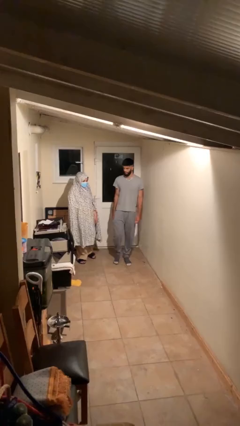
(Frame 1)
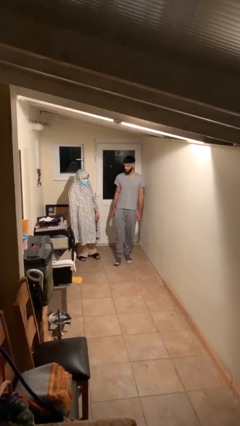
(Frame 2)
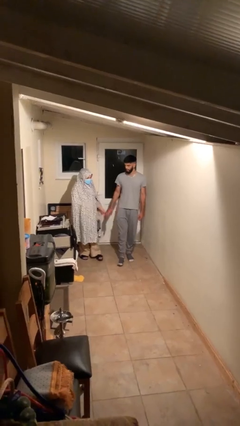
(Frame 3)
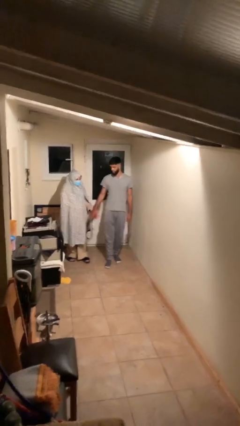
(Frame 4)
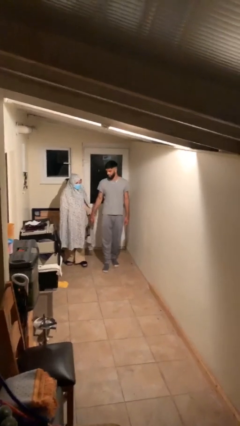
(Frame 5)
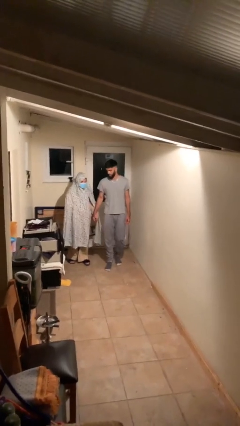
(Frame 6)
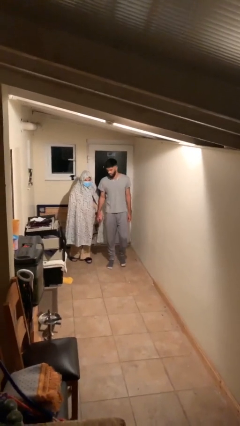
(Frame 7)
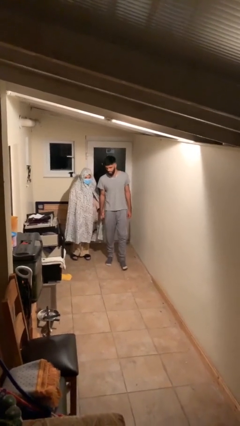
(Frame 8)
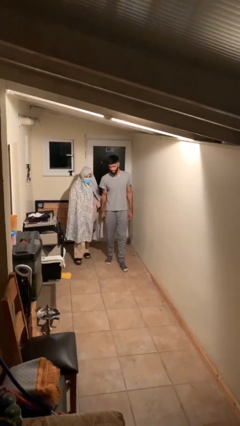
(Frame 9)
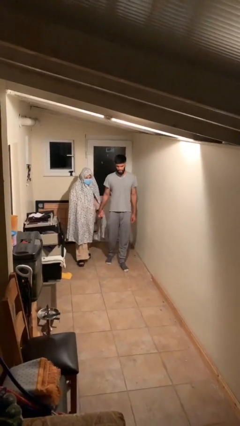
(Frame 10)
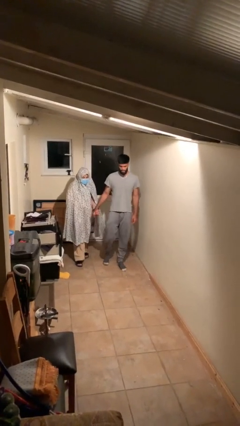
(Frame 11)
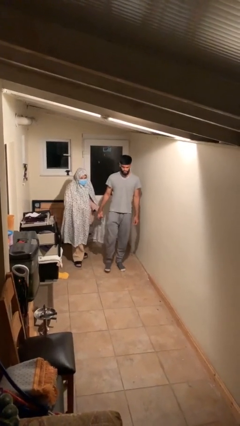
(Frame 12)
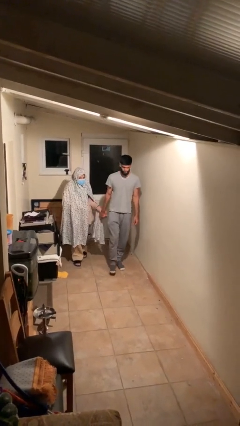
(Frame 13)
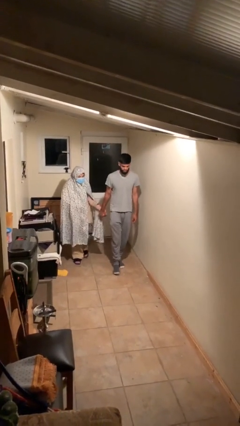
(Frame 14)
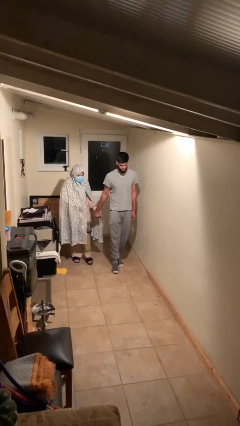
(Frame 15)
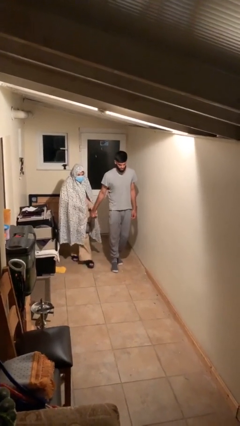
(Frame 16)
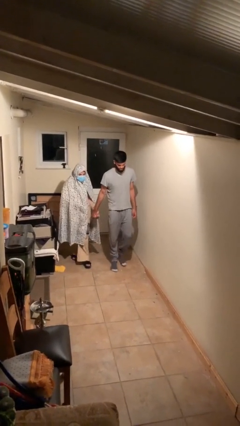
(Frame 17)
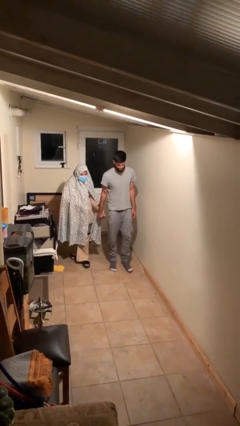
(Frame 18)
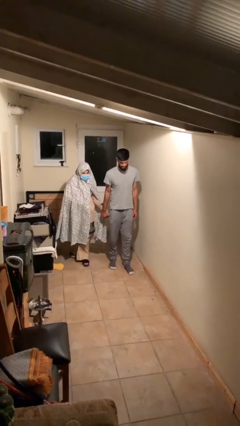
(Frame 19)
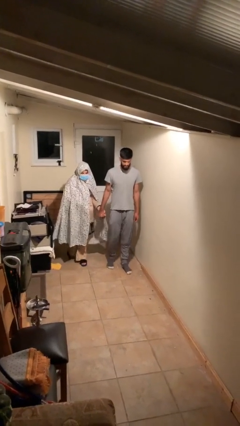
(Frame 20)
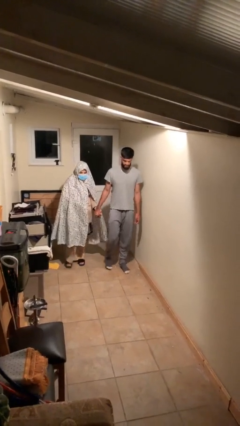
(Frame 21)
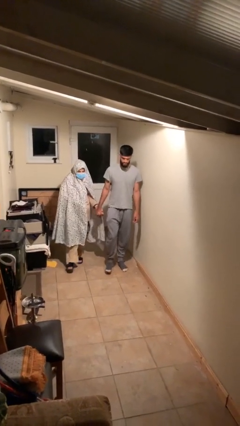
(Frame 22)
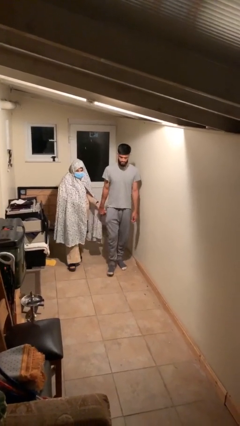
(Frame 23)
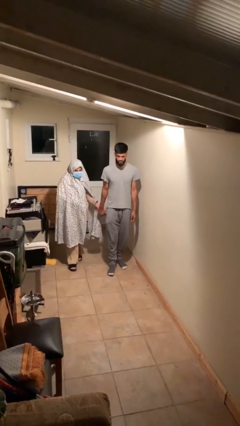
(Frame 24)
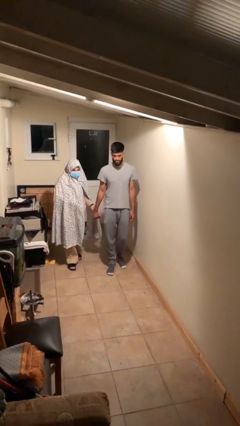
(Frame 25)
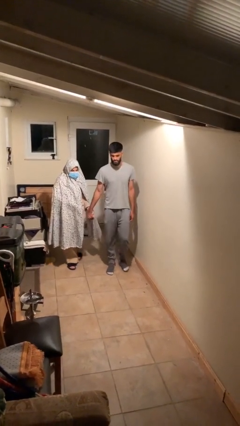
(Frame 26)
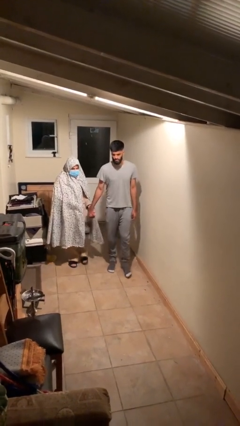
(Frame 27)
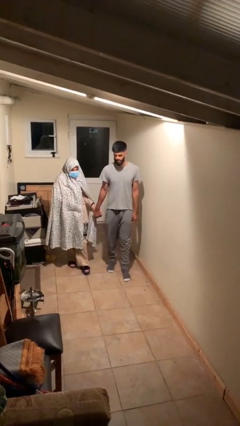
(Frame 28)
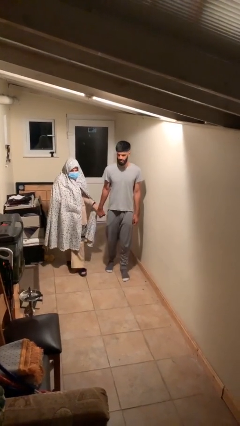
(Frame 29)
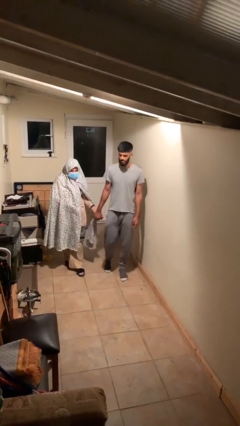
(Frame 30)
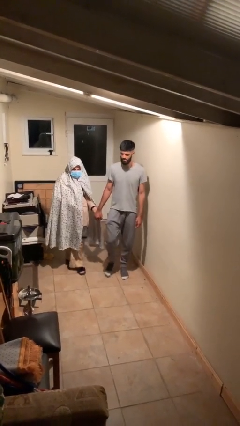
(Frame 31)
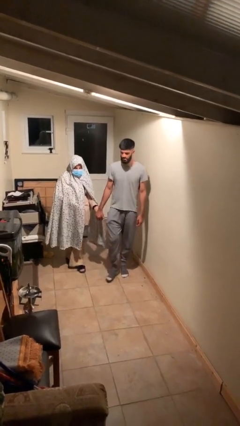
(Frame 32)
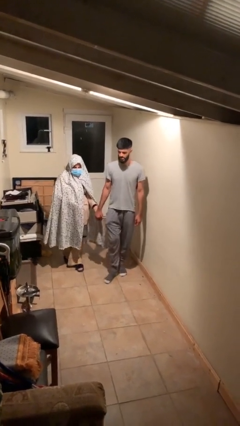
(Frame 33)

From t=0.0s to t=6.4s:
person holds hand

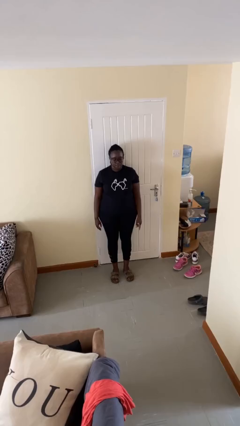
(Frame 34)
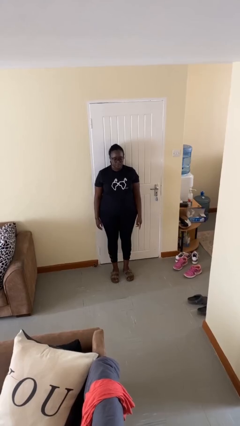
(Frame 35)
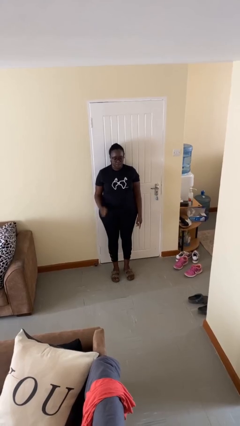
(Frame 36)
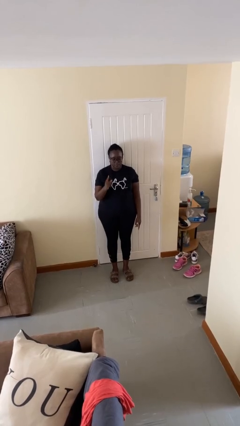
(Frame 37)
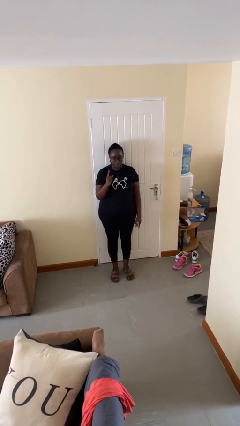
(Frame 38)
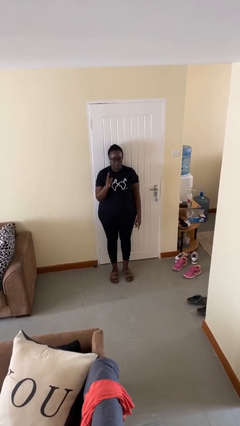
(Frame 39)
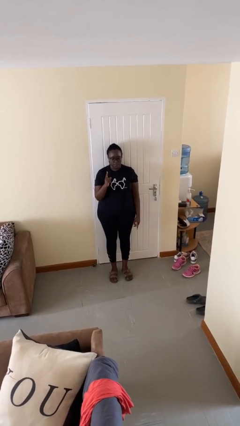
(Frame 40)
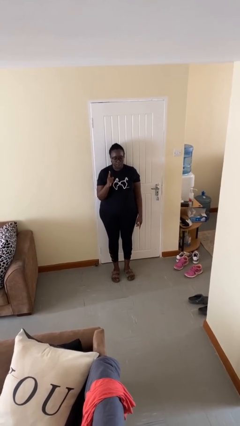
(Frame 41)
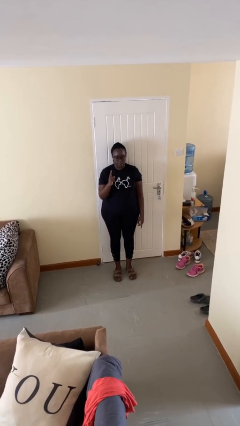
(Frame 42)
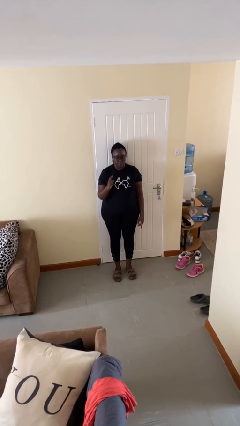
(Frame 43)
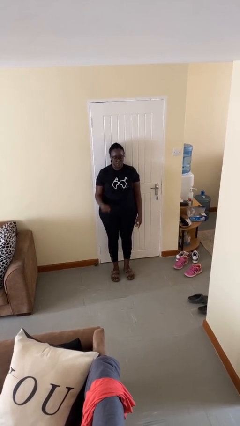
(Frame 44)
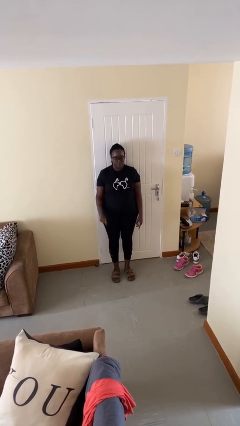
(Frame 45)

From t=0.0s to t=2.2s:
person gestures number one

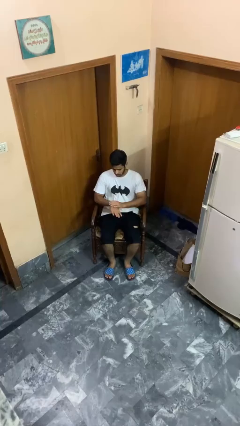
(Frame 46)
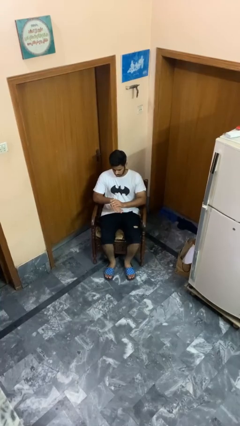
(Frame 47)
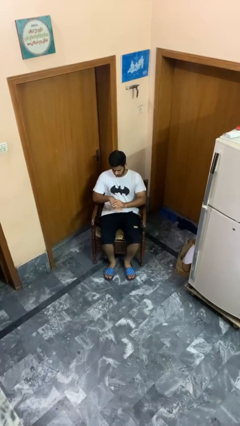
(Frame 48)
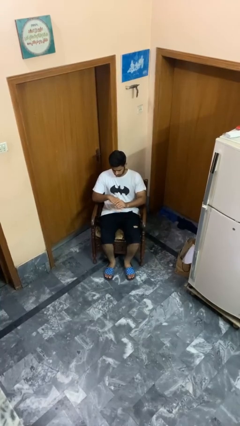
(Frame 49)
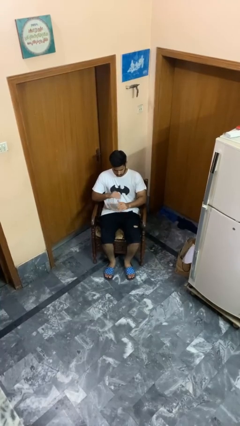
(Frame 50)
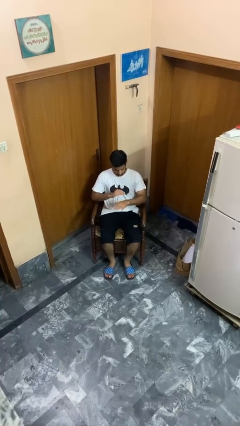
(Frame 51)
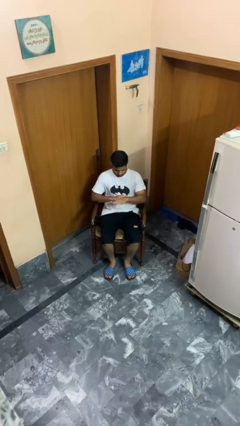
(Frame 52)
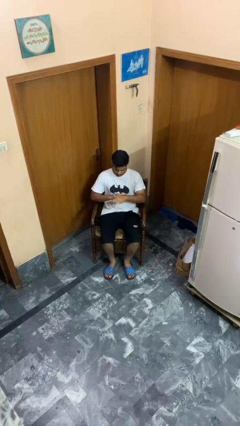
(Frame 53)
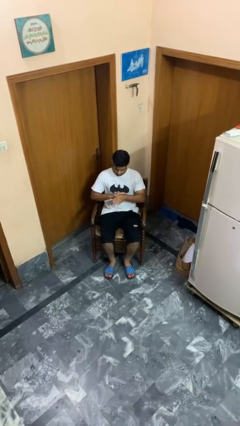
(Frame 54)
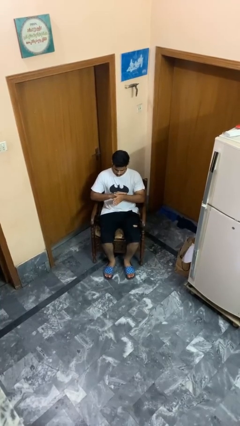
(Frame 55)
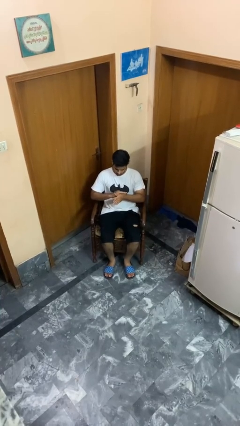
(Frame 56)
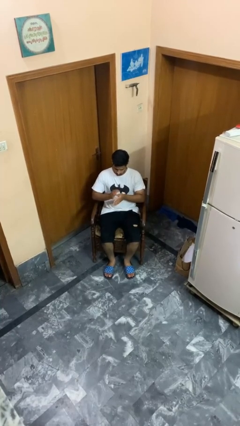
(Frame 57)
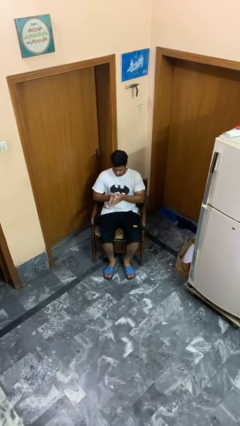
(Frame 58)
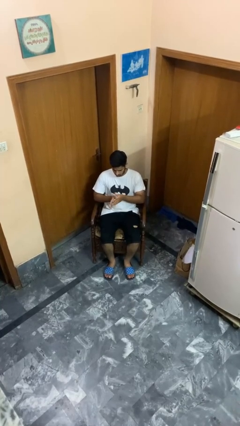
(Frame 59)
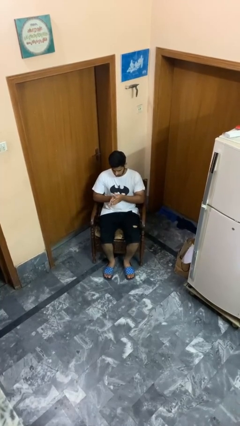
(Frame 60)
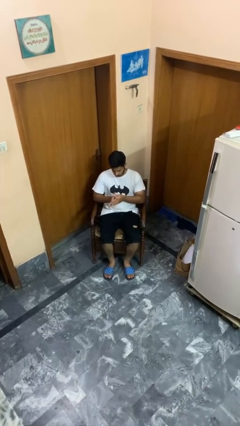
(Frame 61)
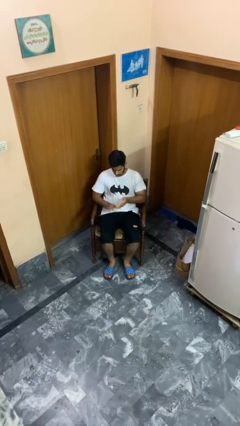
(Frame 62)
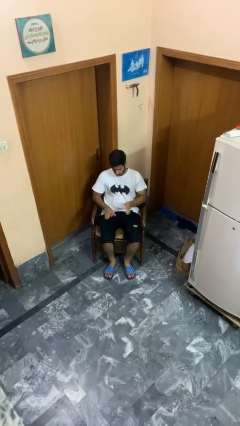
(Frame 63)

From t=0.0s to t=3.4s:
person looks at hands in lap

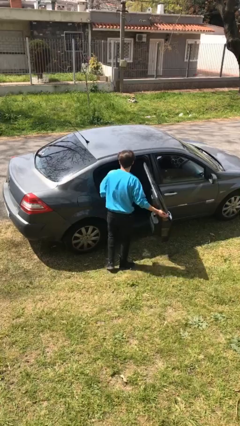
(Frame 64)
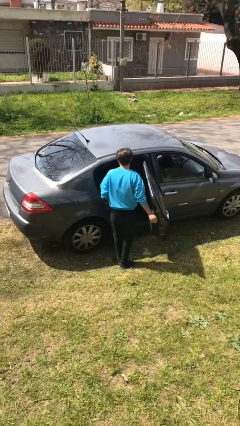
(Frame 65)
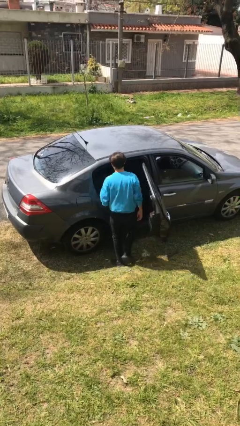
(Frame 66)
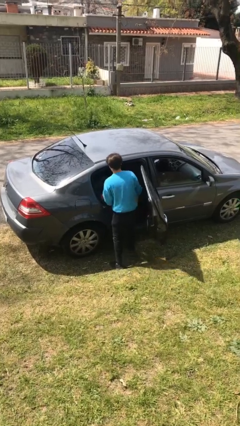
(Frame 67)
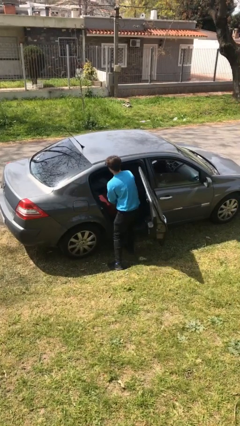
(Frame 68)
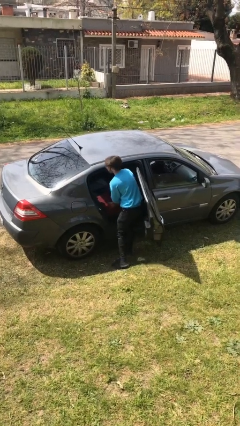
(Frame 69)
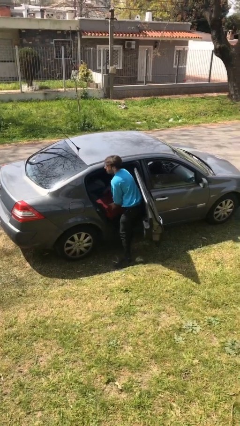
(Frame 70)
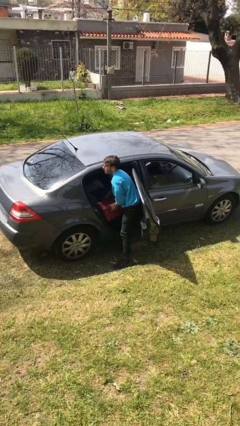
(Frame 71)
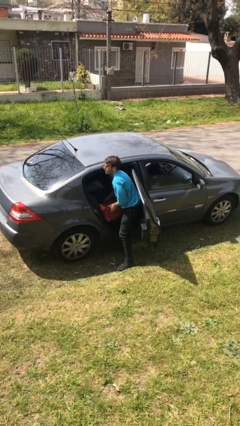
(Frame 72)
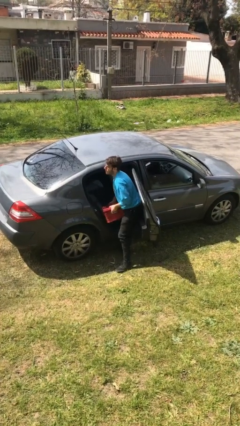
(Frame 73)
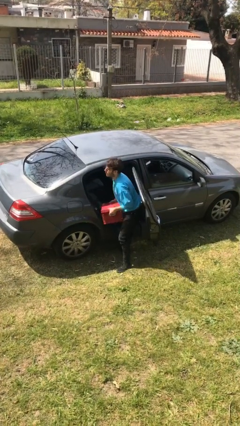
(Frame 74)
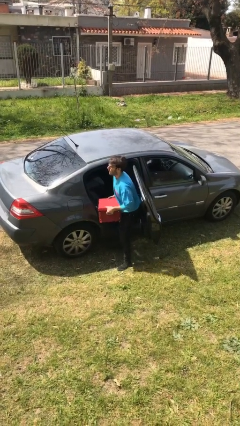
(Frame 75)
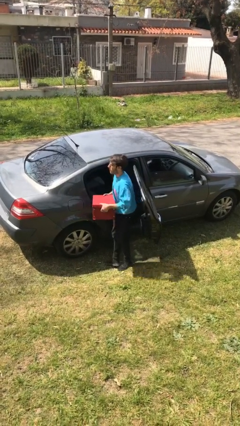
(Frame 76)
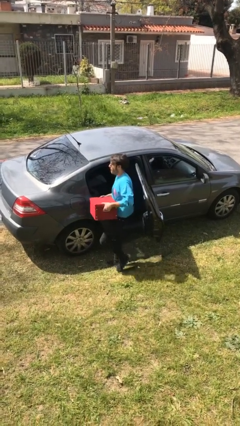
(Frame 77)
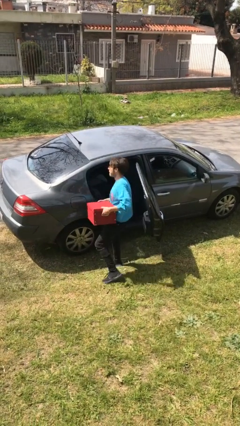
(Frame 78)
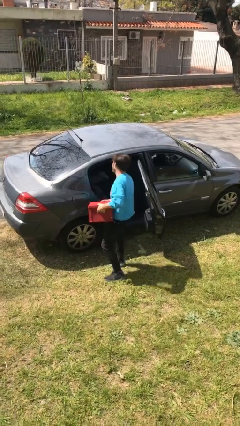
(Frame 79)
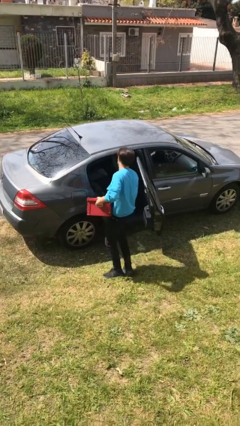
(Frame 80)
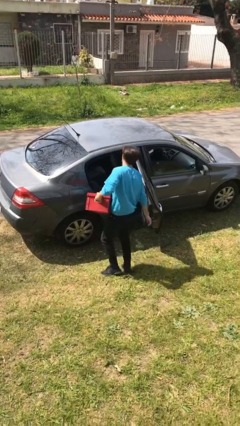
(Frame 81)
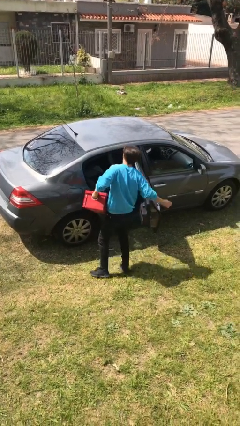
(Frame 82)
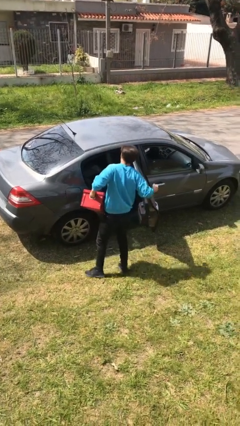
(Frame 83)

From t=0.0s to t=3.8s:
person unloads car

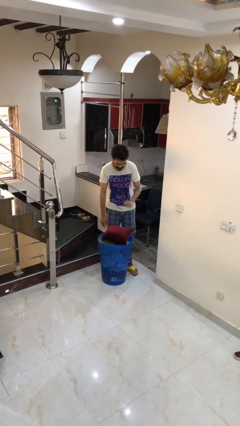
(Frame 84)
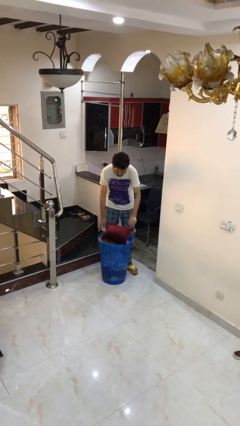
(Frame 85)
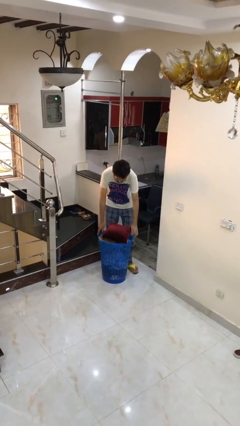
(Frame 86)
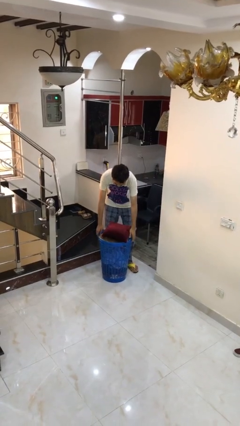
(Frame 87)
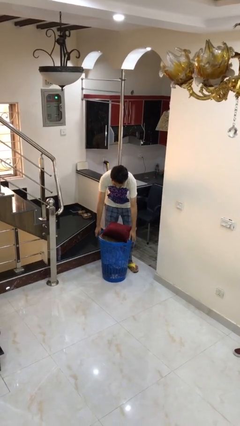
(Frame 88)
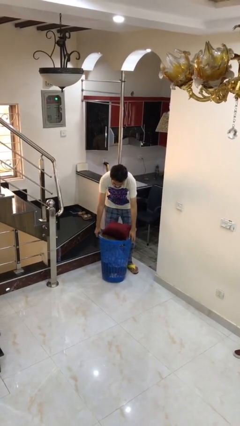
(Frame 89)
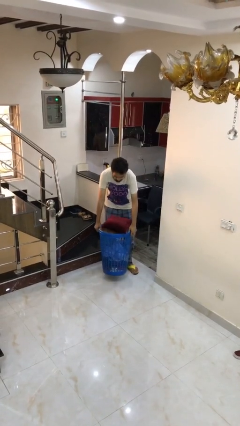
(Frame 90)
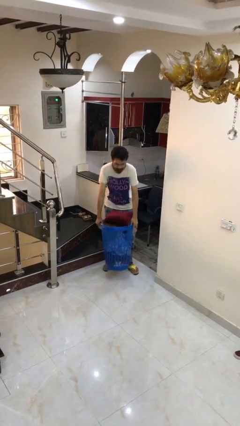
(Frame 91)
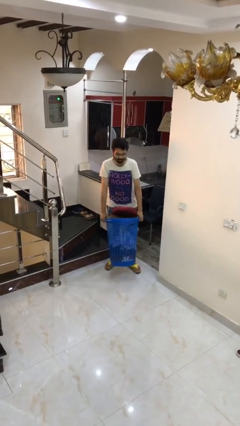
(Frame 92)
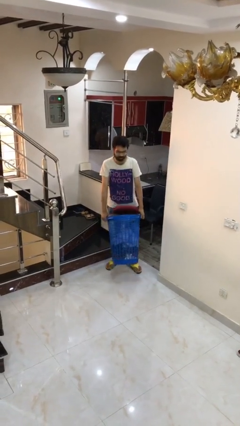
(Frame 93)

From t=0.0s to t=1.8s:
person picks up object from floor

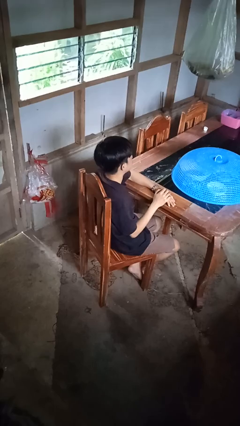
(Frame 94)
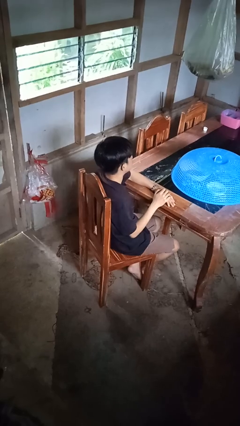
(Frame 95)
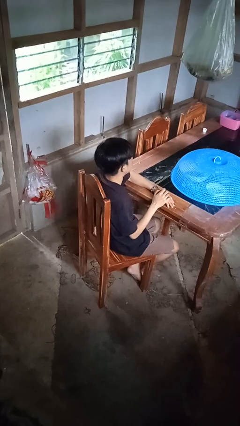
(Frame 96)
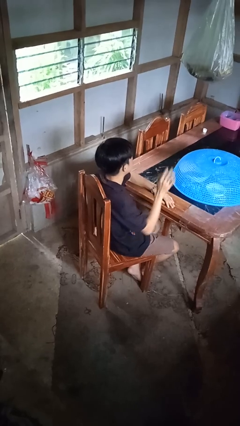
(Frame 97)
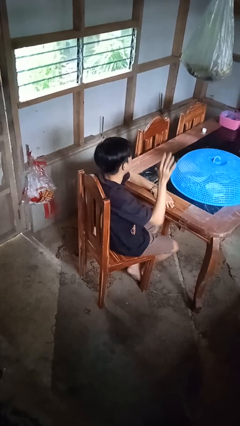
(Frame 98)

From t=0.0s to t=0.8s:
person gestures raise hand
